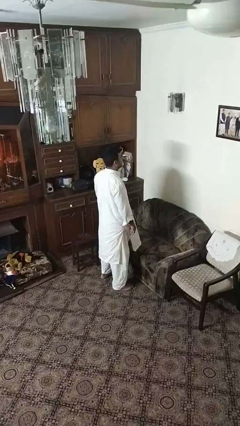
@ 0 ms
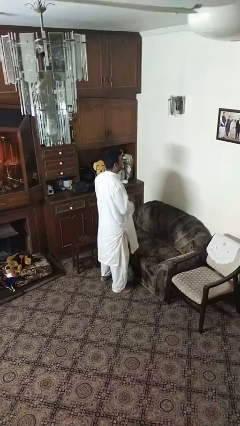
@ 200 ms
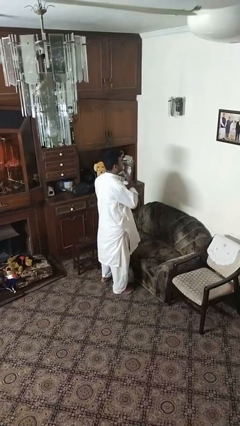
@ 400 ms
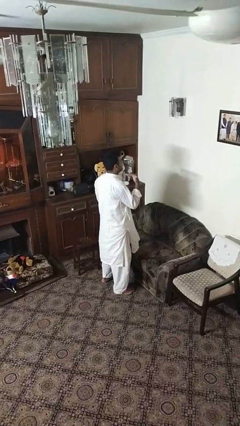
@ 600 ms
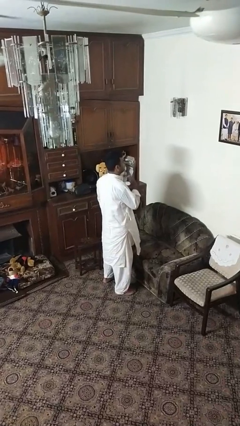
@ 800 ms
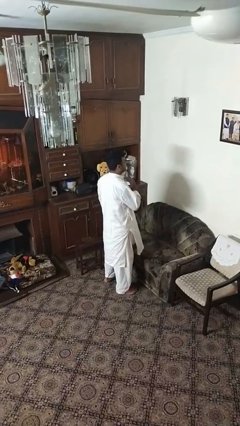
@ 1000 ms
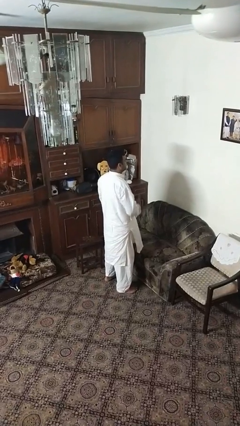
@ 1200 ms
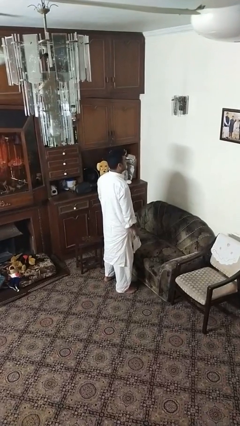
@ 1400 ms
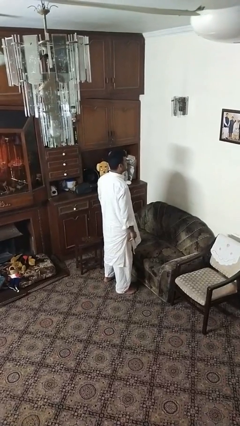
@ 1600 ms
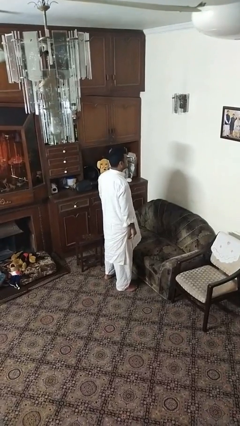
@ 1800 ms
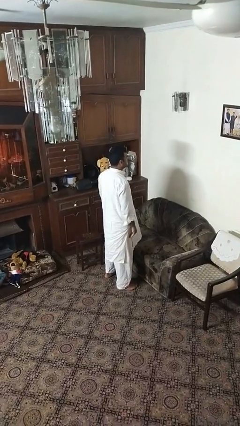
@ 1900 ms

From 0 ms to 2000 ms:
person gestures cut

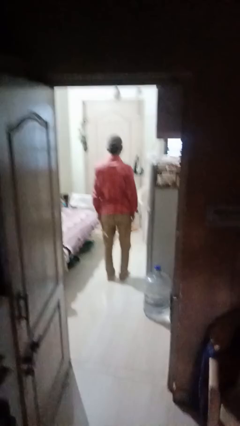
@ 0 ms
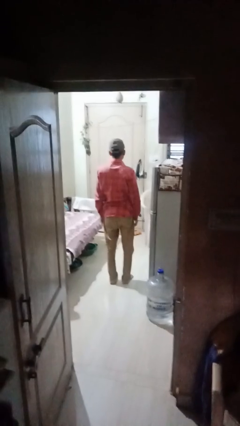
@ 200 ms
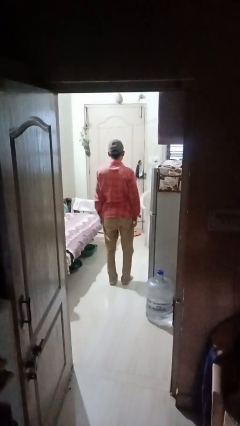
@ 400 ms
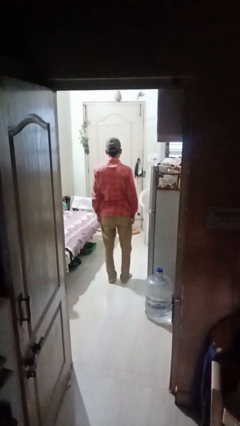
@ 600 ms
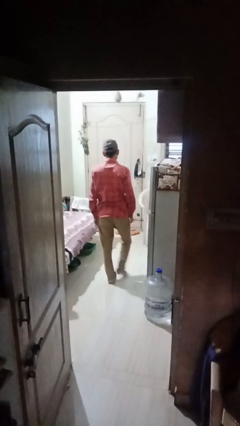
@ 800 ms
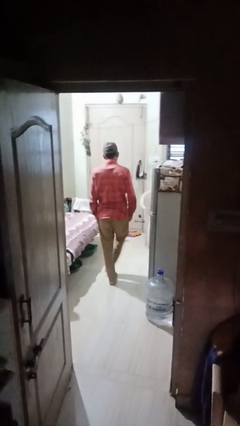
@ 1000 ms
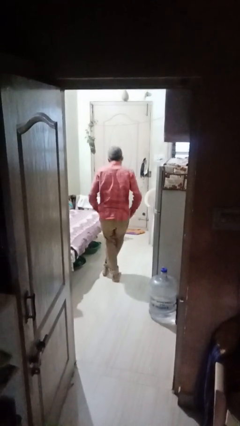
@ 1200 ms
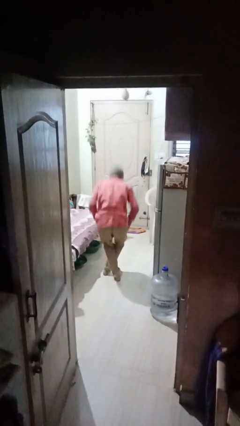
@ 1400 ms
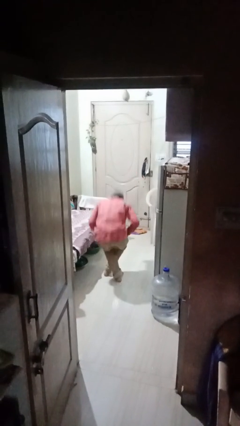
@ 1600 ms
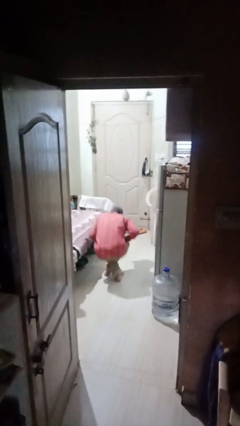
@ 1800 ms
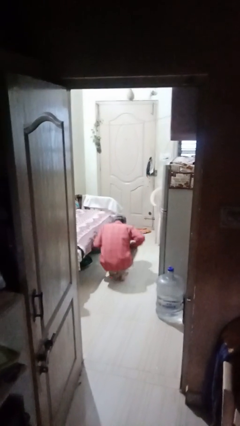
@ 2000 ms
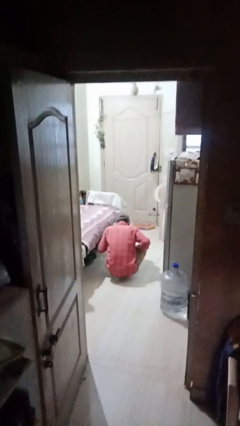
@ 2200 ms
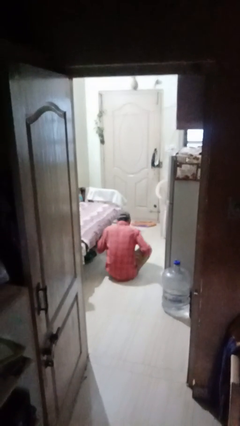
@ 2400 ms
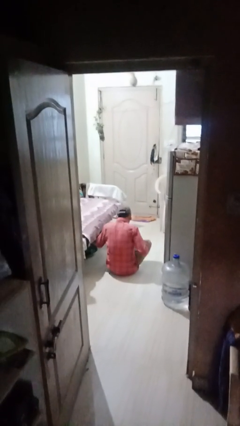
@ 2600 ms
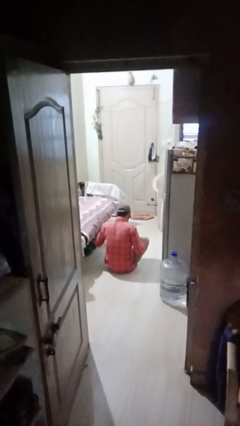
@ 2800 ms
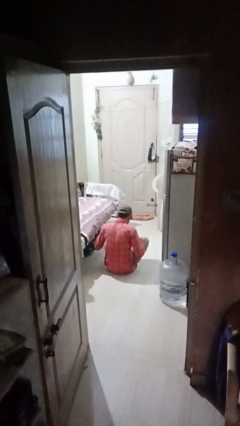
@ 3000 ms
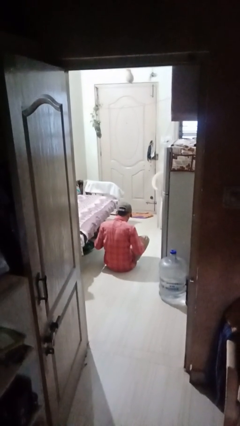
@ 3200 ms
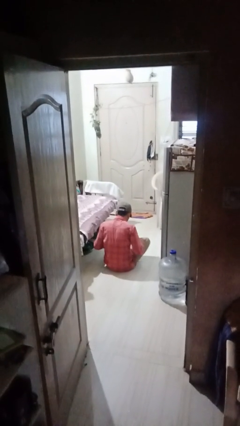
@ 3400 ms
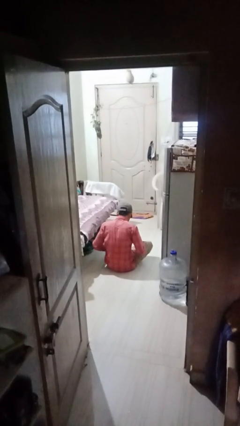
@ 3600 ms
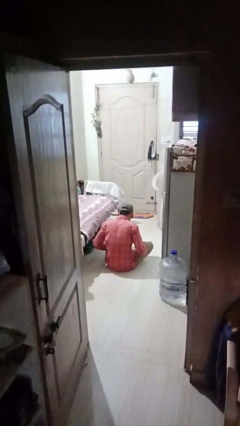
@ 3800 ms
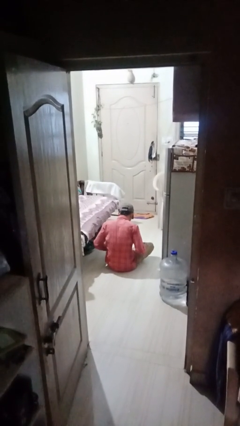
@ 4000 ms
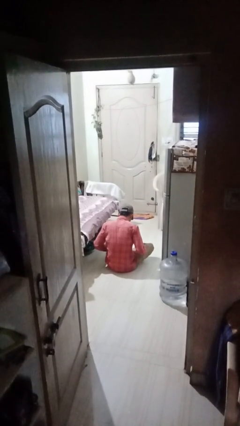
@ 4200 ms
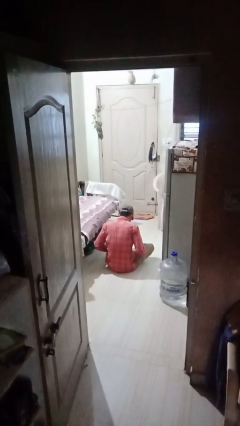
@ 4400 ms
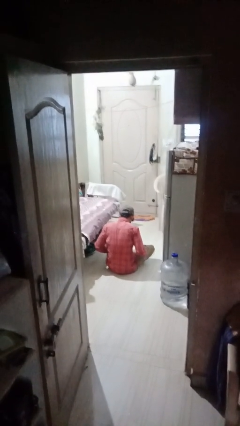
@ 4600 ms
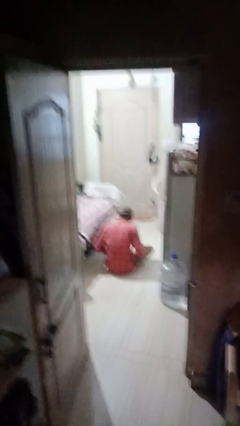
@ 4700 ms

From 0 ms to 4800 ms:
person sits crisscross

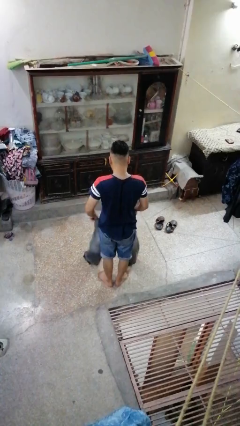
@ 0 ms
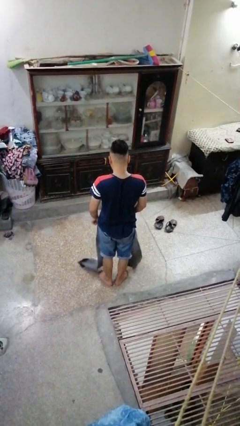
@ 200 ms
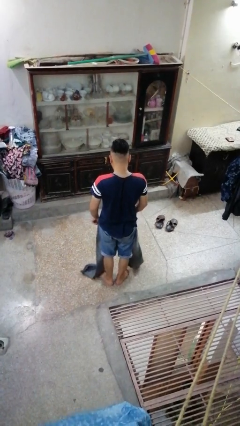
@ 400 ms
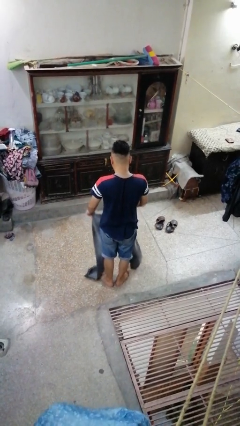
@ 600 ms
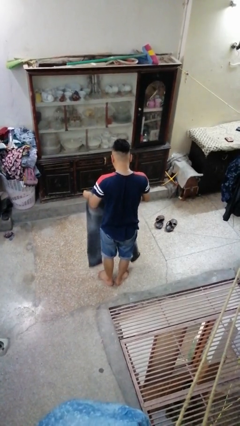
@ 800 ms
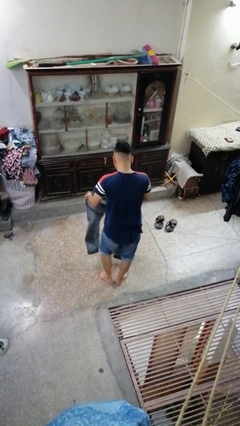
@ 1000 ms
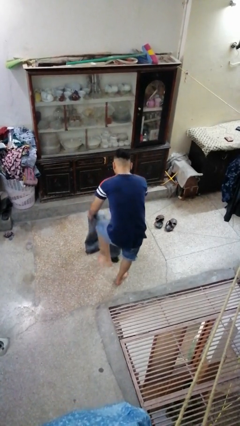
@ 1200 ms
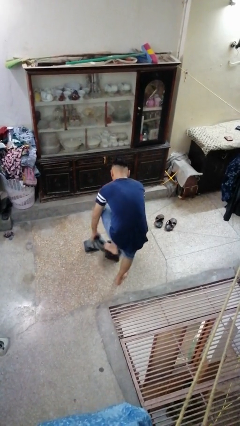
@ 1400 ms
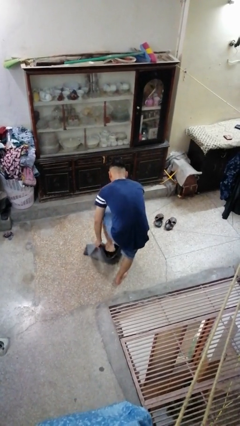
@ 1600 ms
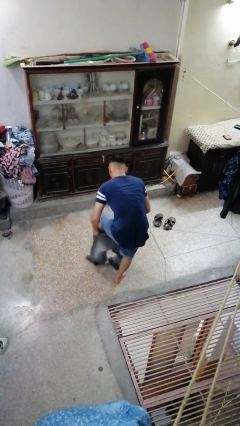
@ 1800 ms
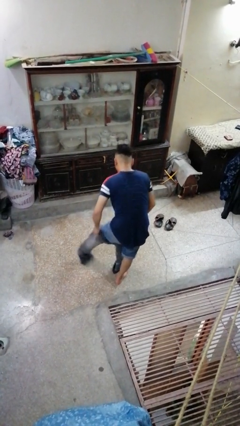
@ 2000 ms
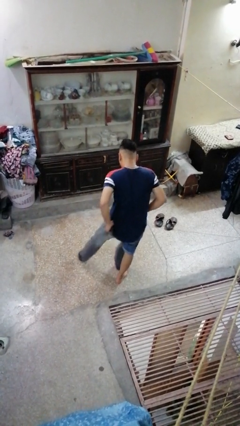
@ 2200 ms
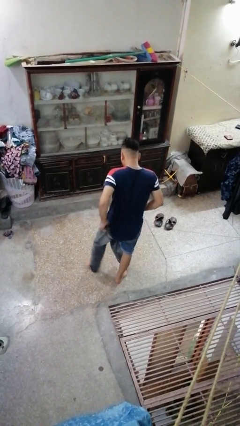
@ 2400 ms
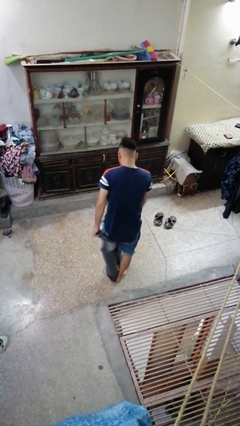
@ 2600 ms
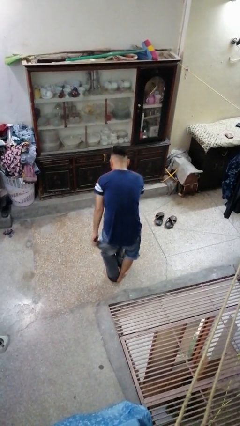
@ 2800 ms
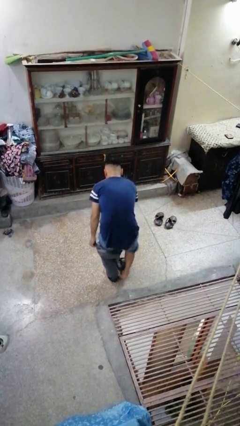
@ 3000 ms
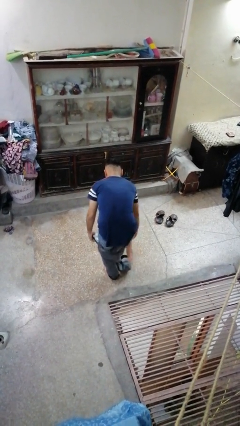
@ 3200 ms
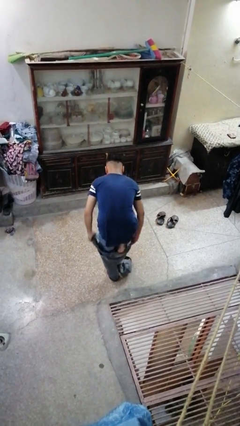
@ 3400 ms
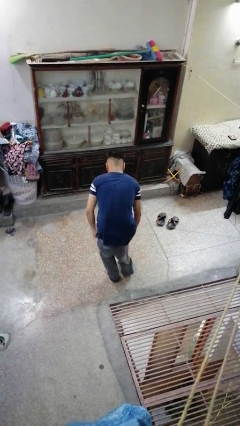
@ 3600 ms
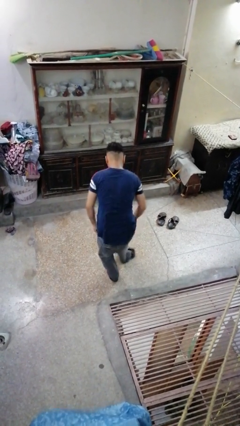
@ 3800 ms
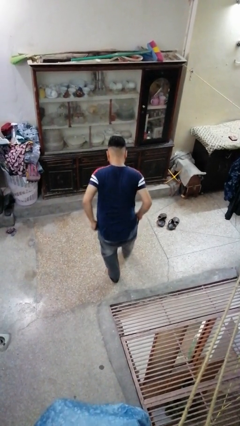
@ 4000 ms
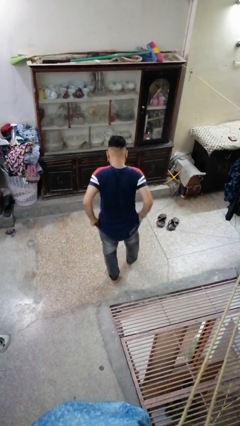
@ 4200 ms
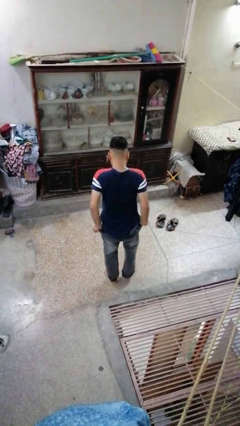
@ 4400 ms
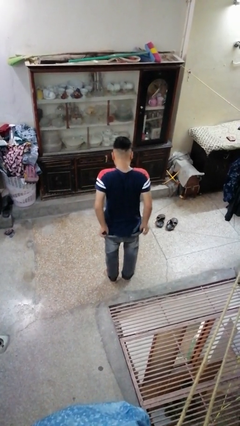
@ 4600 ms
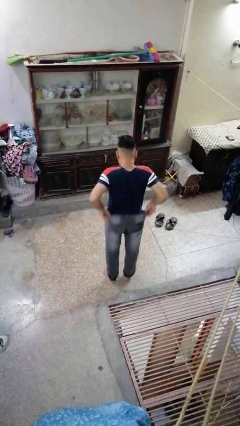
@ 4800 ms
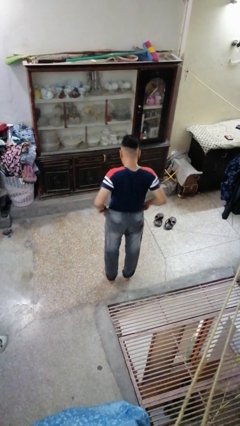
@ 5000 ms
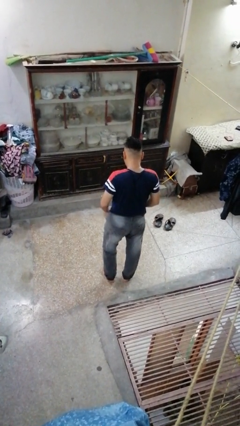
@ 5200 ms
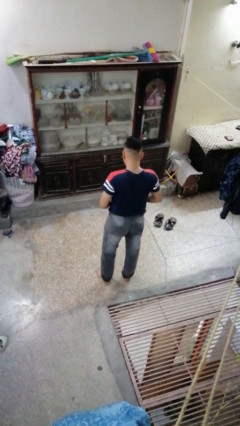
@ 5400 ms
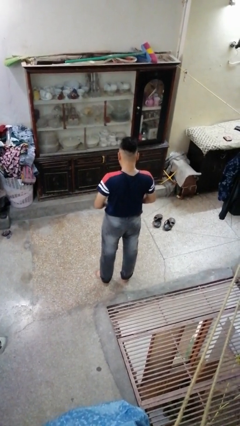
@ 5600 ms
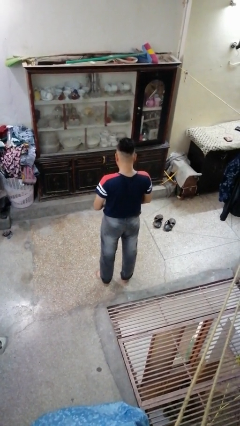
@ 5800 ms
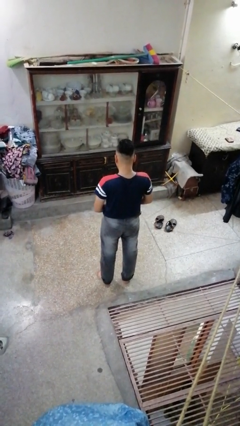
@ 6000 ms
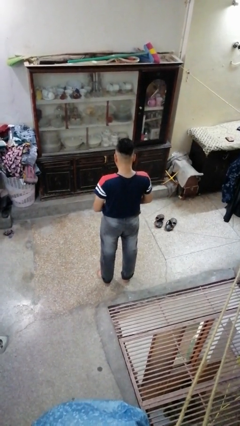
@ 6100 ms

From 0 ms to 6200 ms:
person puts on pants

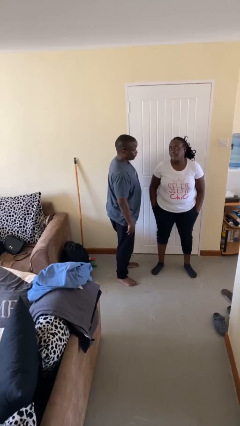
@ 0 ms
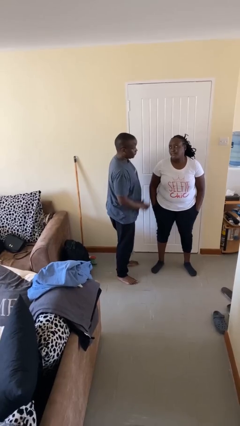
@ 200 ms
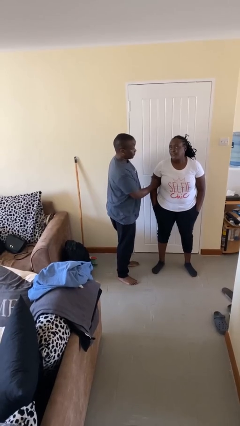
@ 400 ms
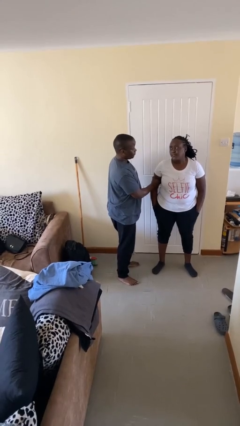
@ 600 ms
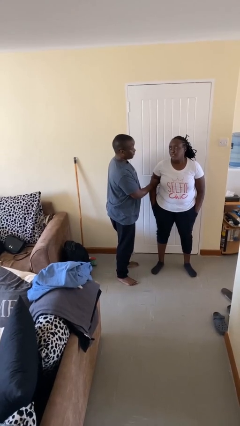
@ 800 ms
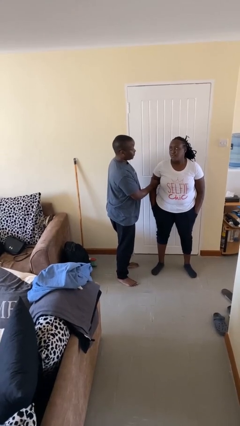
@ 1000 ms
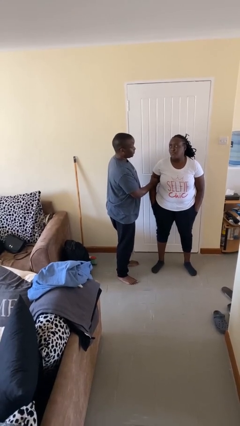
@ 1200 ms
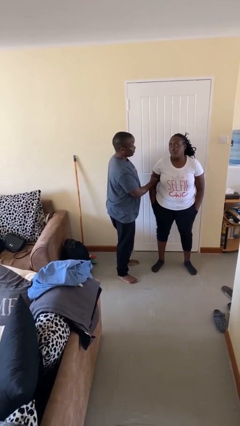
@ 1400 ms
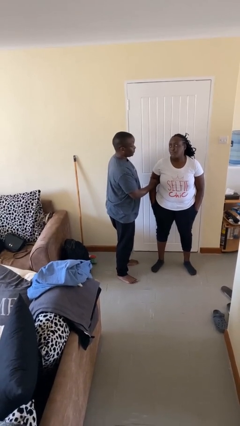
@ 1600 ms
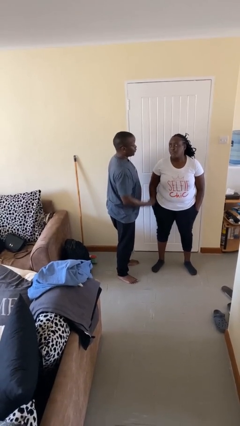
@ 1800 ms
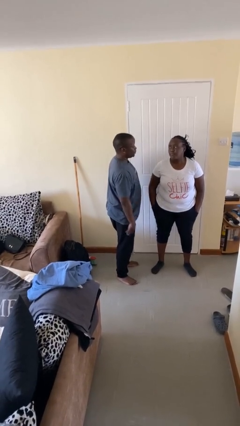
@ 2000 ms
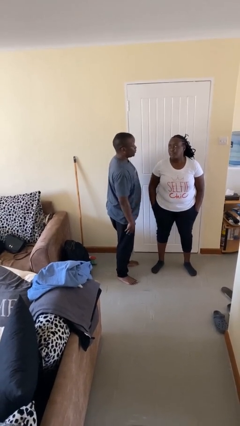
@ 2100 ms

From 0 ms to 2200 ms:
person grabs person by bicep

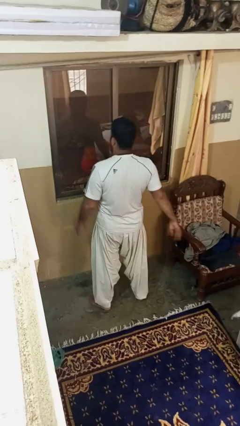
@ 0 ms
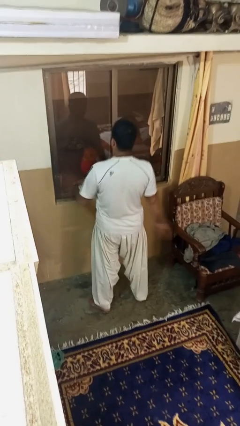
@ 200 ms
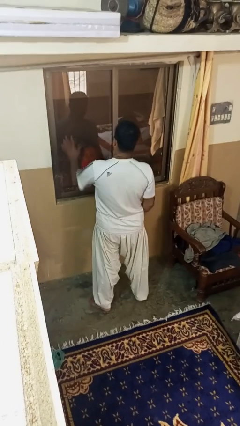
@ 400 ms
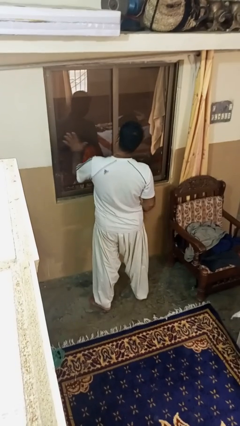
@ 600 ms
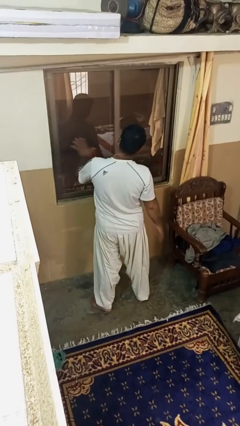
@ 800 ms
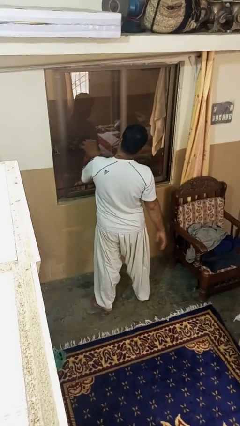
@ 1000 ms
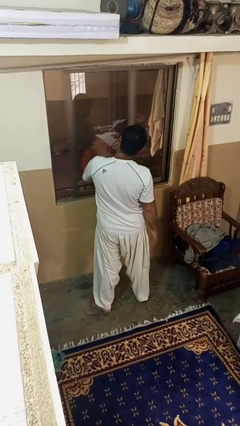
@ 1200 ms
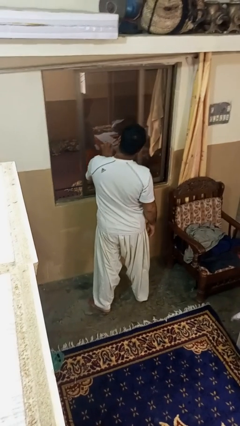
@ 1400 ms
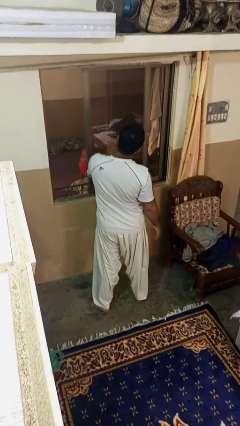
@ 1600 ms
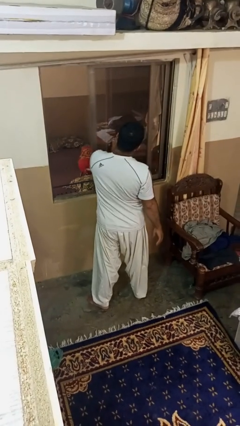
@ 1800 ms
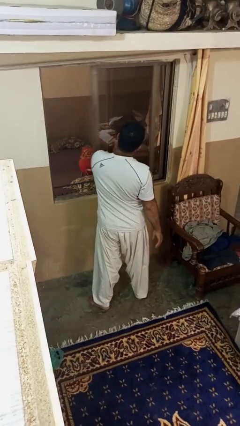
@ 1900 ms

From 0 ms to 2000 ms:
person opens home window

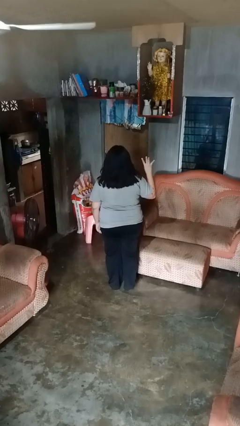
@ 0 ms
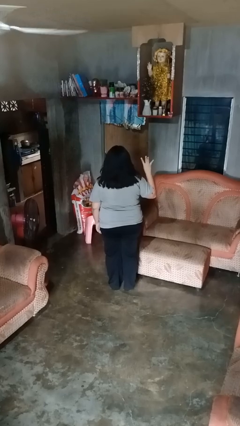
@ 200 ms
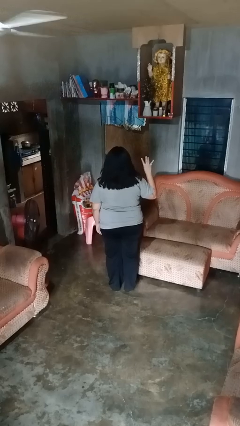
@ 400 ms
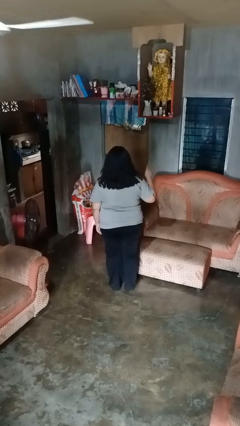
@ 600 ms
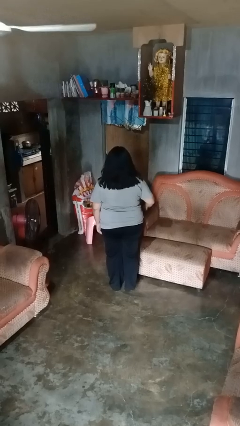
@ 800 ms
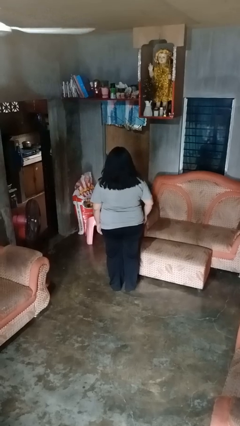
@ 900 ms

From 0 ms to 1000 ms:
person gestures number four
